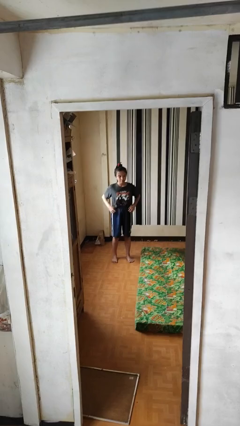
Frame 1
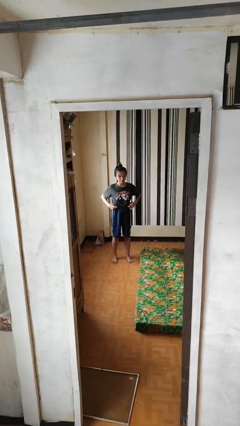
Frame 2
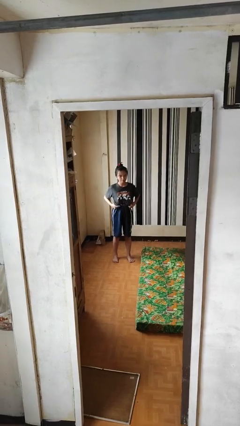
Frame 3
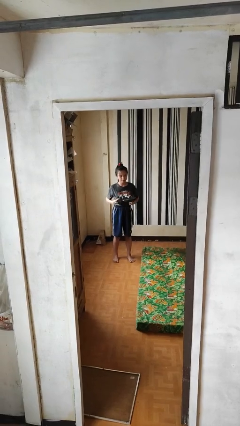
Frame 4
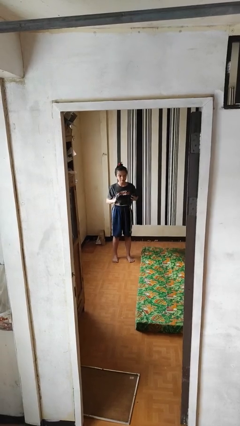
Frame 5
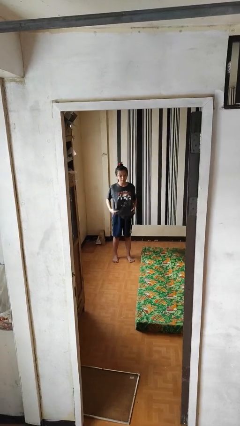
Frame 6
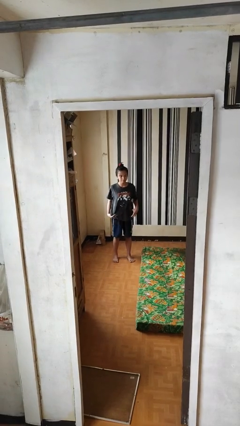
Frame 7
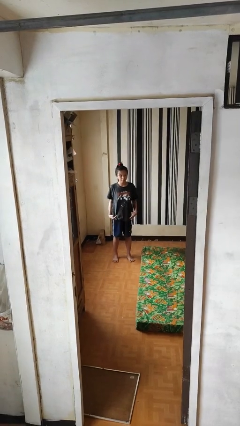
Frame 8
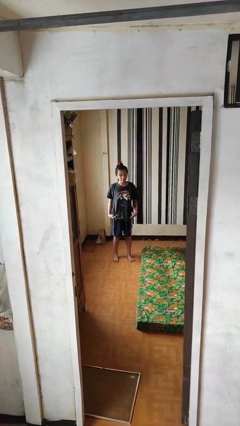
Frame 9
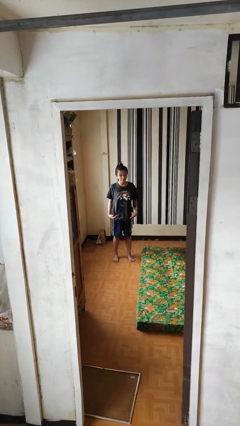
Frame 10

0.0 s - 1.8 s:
person untucks shirt

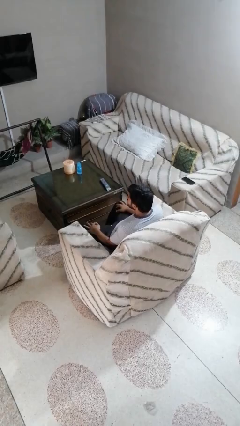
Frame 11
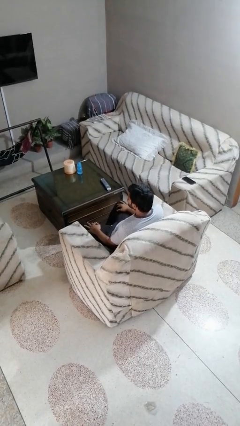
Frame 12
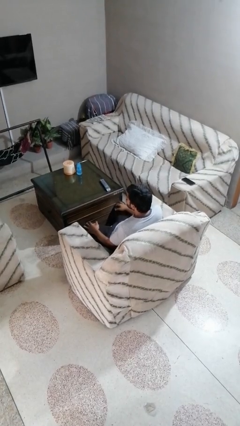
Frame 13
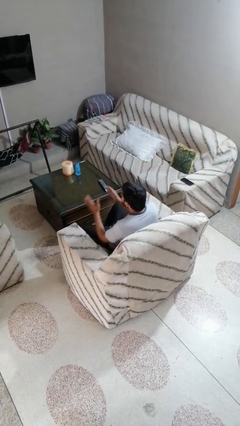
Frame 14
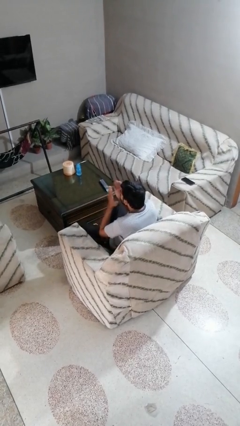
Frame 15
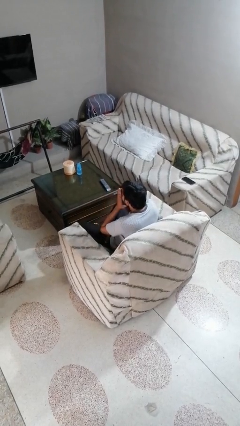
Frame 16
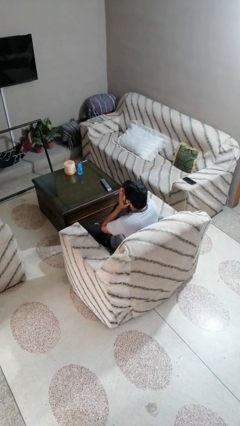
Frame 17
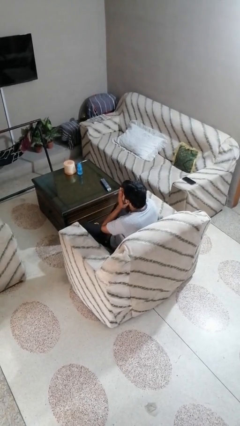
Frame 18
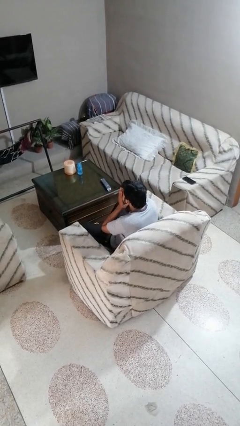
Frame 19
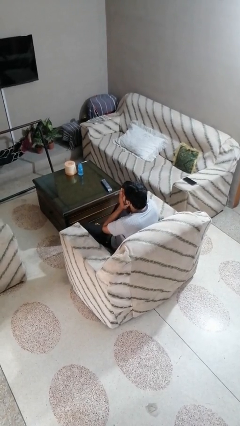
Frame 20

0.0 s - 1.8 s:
person covers face with hands

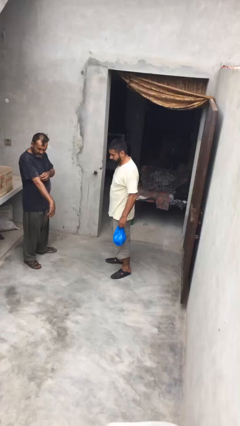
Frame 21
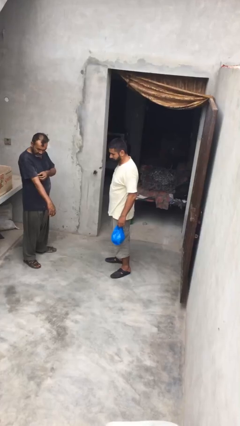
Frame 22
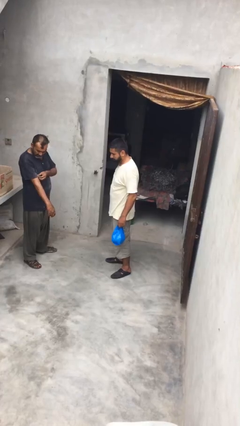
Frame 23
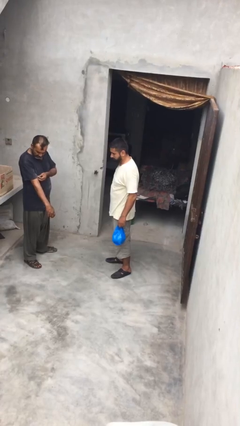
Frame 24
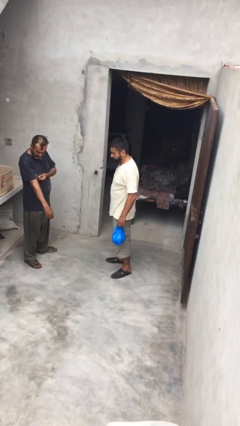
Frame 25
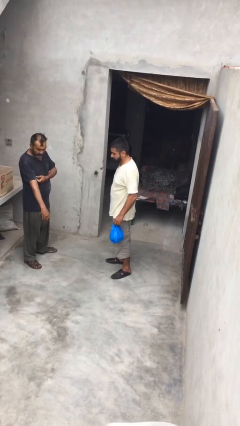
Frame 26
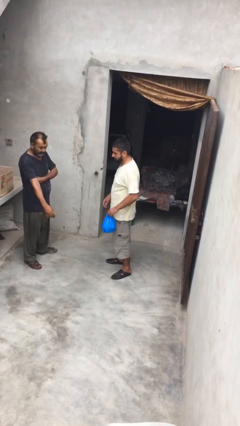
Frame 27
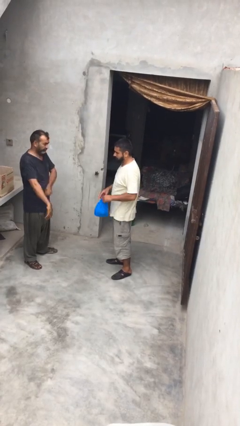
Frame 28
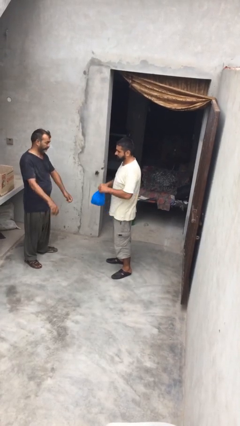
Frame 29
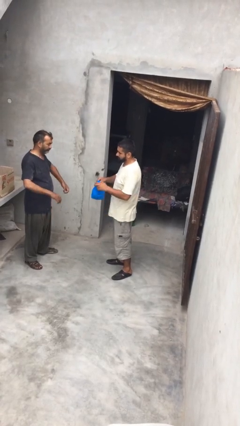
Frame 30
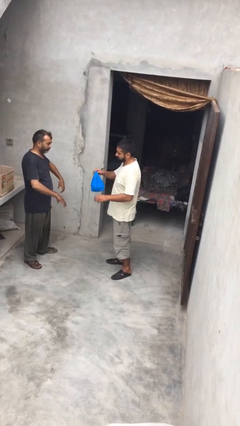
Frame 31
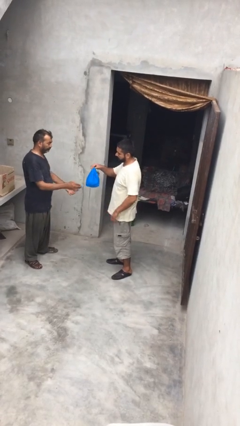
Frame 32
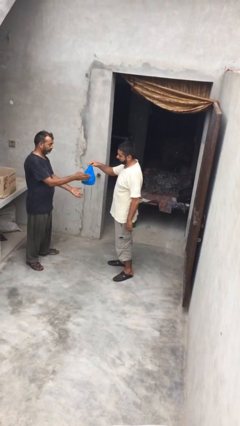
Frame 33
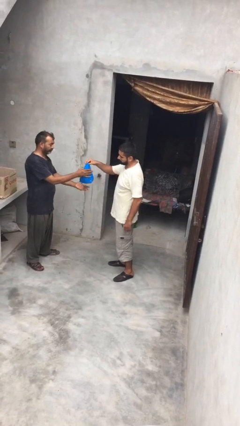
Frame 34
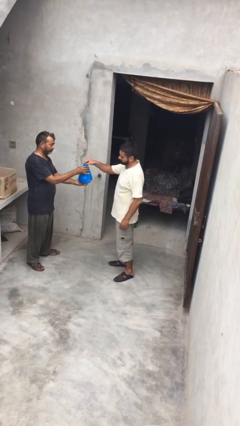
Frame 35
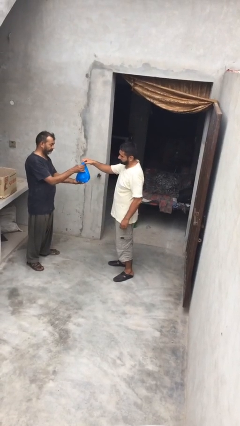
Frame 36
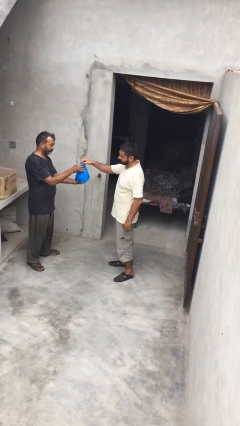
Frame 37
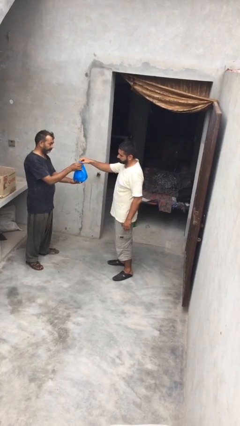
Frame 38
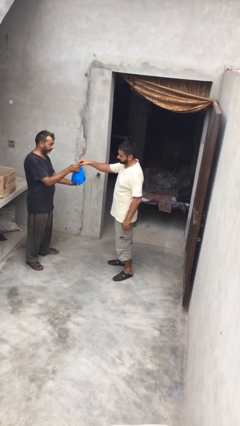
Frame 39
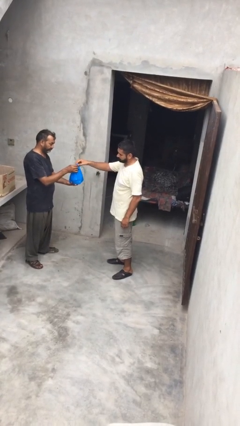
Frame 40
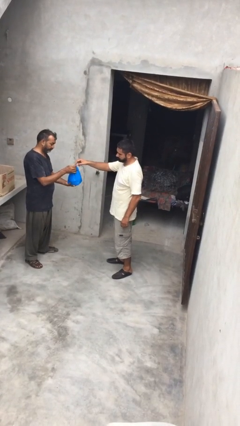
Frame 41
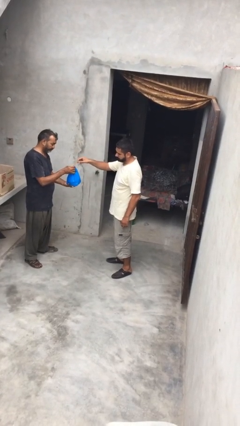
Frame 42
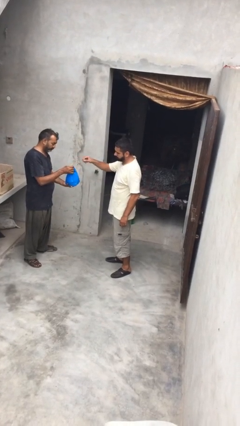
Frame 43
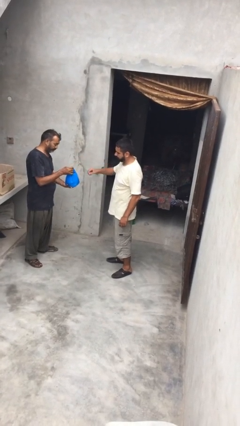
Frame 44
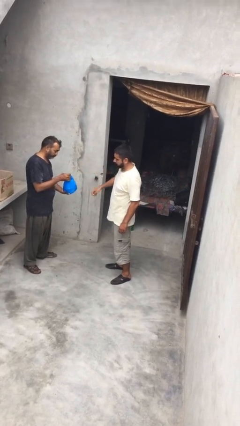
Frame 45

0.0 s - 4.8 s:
person transfers object to person

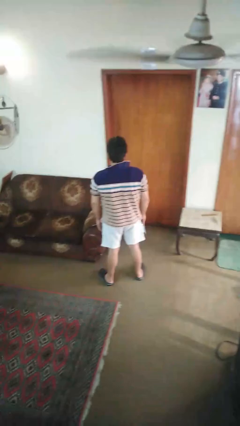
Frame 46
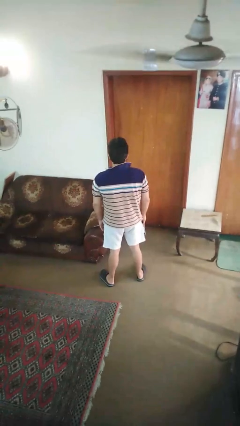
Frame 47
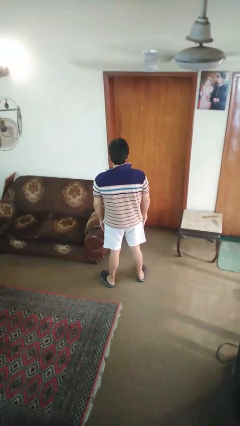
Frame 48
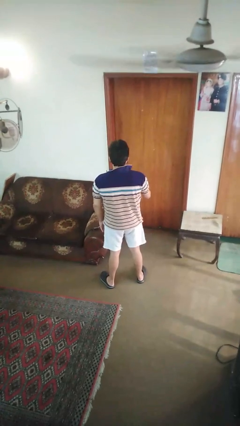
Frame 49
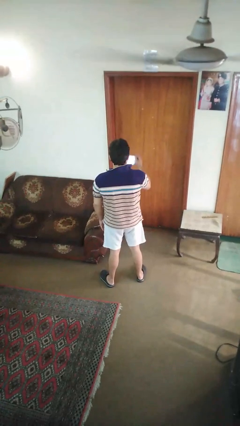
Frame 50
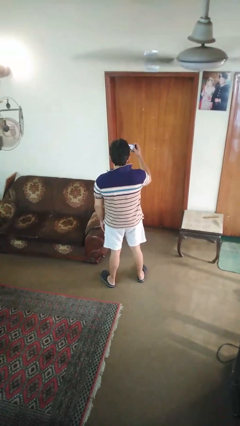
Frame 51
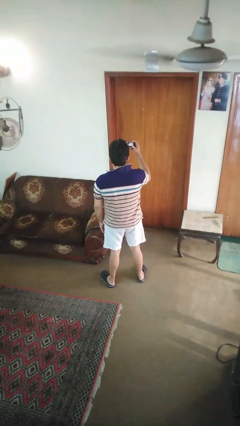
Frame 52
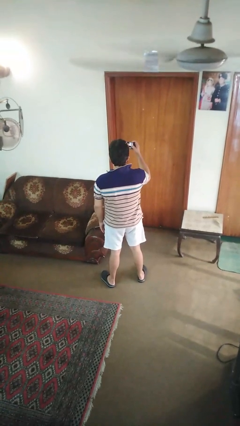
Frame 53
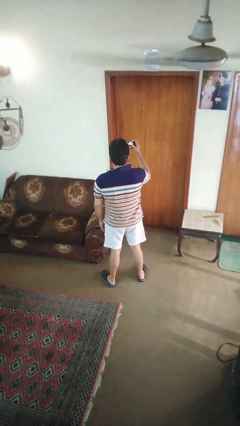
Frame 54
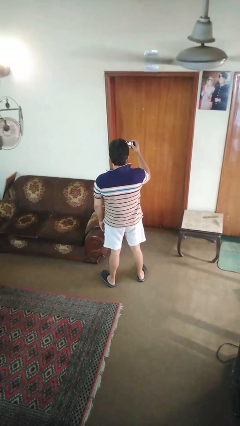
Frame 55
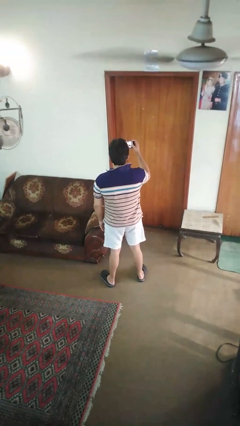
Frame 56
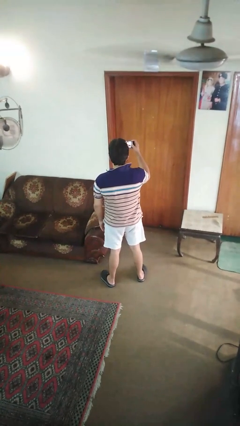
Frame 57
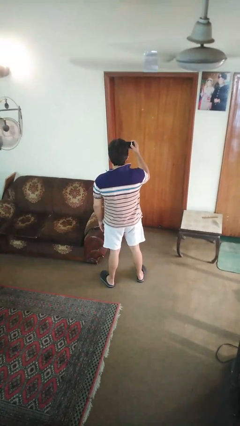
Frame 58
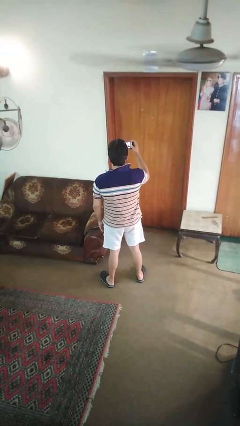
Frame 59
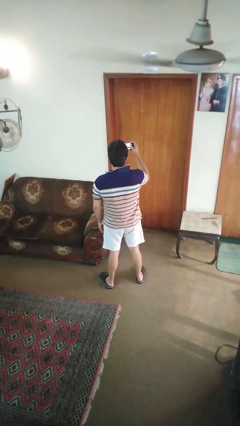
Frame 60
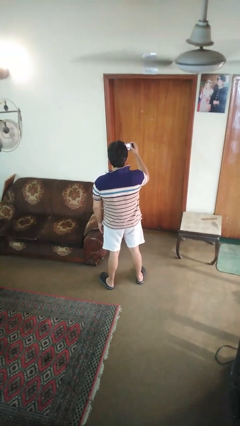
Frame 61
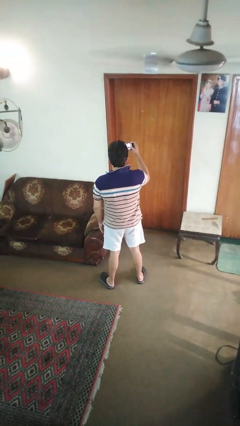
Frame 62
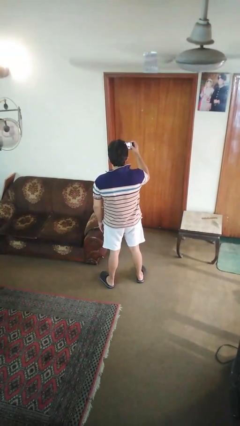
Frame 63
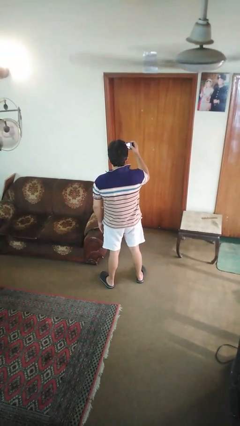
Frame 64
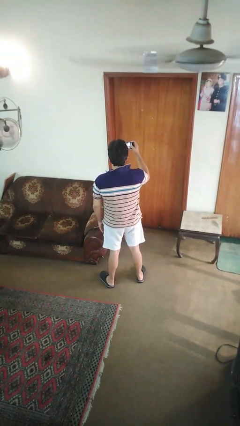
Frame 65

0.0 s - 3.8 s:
person takes selfie

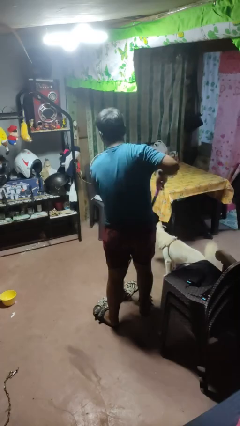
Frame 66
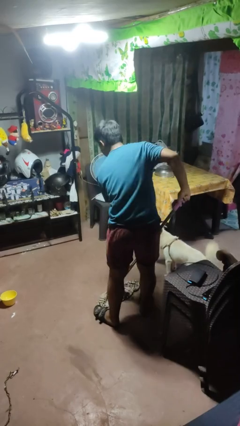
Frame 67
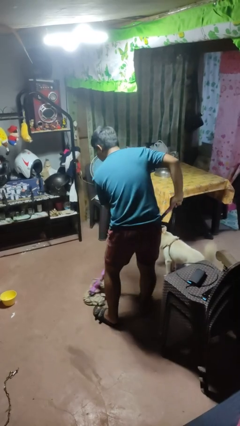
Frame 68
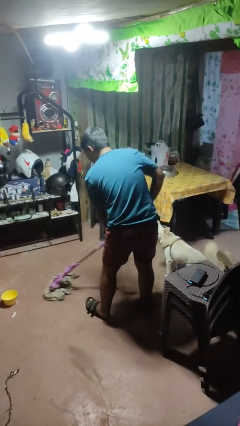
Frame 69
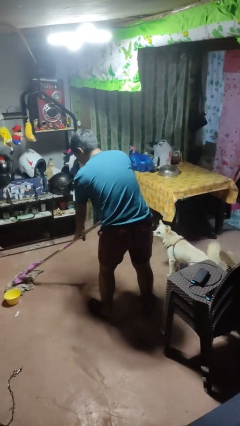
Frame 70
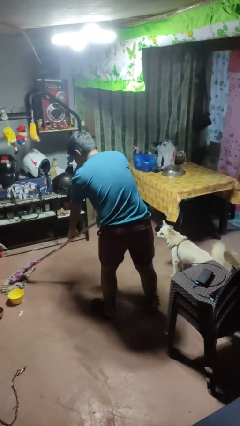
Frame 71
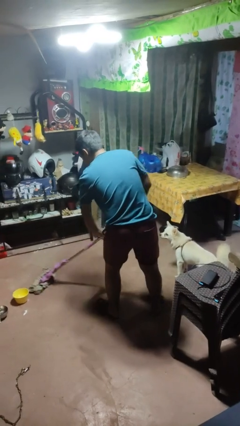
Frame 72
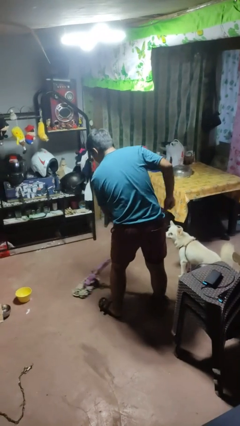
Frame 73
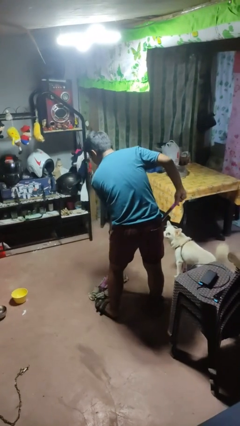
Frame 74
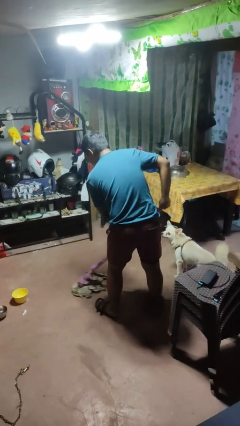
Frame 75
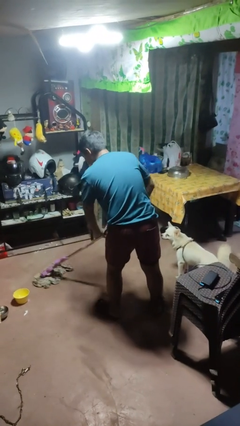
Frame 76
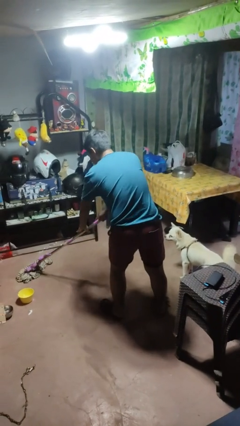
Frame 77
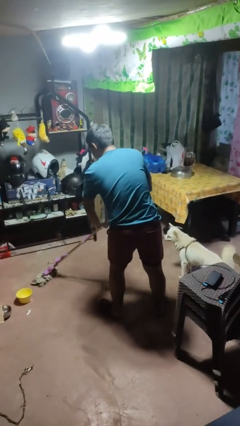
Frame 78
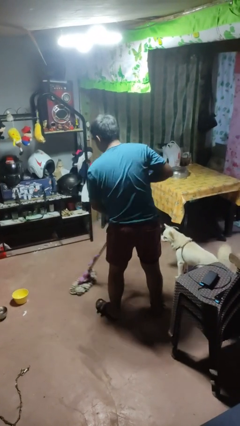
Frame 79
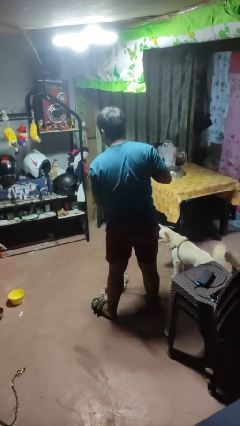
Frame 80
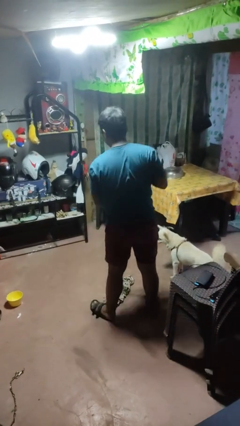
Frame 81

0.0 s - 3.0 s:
person mops

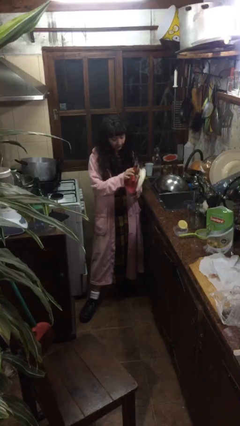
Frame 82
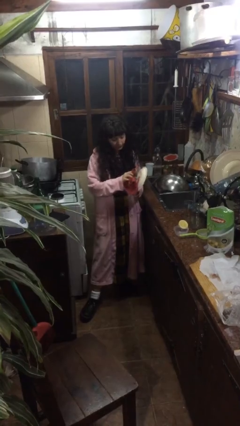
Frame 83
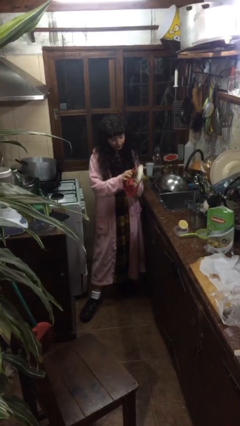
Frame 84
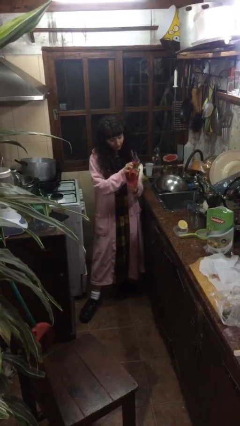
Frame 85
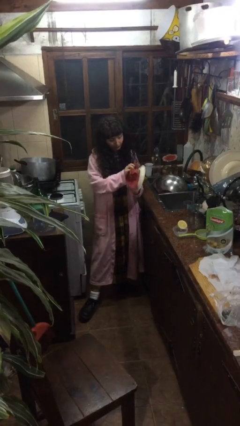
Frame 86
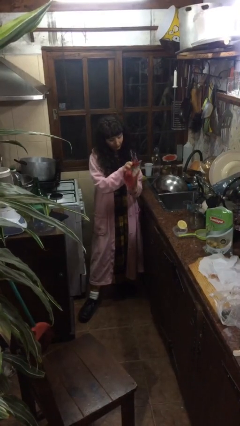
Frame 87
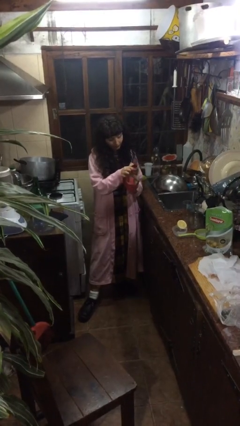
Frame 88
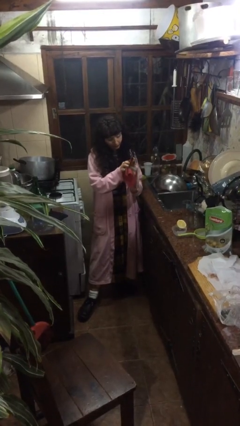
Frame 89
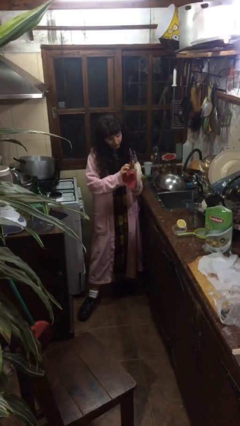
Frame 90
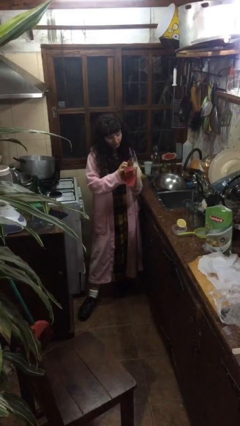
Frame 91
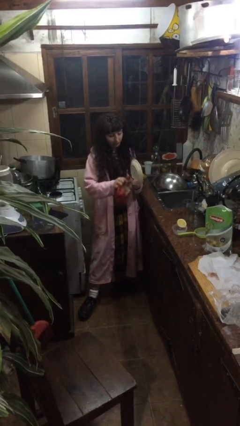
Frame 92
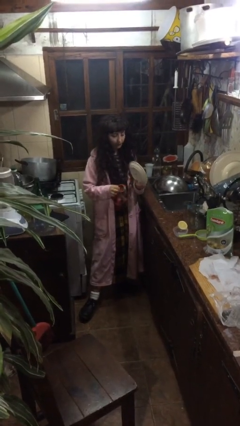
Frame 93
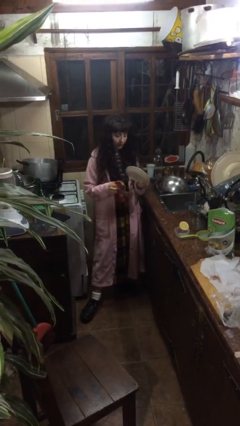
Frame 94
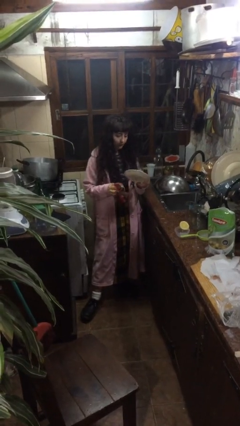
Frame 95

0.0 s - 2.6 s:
person dries dish
